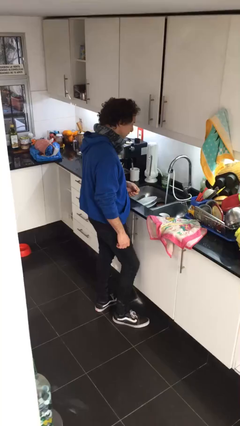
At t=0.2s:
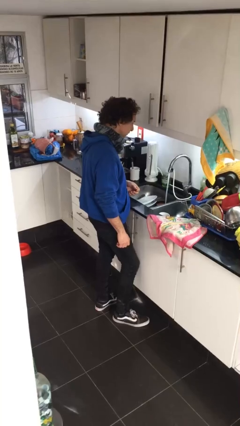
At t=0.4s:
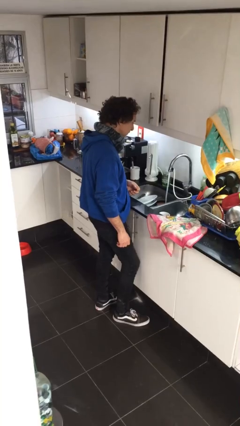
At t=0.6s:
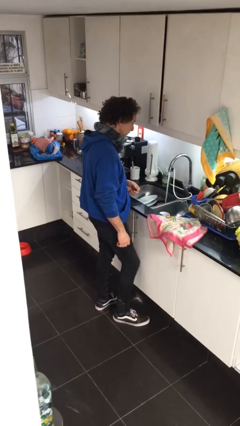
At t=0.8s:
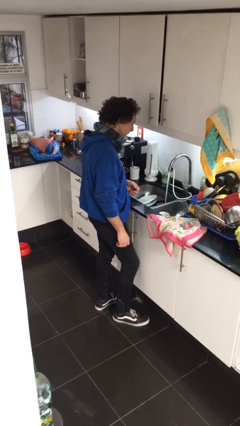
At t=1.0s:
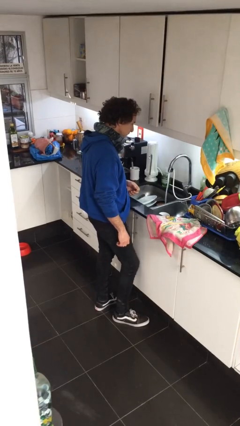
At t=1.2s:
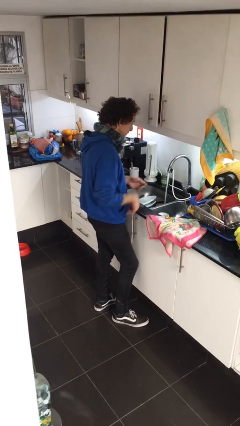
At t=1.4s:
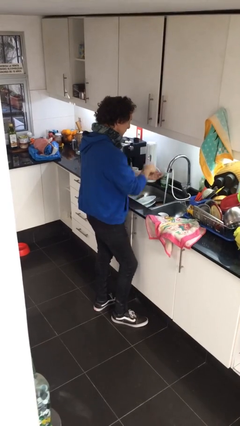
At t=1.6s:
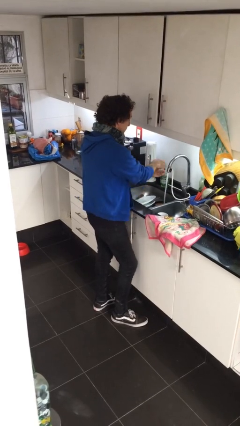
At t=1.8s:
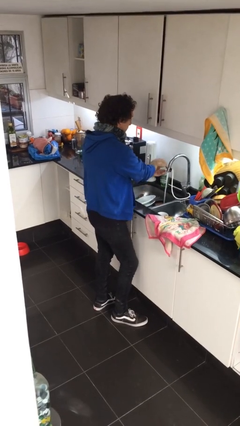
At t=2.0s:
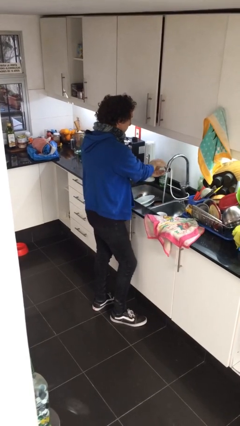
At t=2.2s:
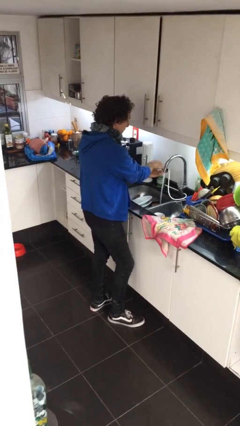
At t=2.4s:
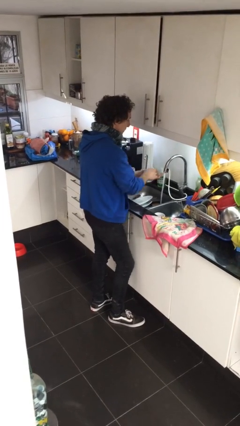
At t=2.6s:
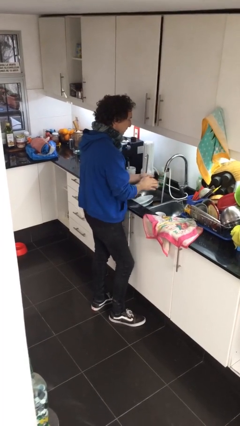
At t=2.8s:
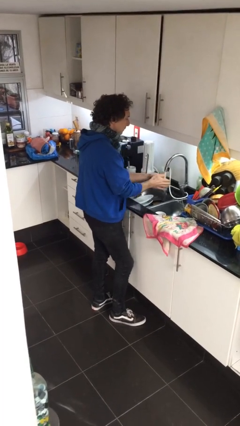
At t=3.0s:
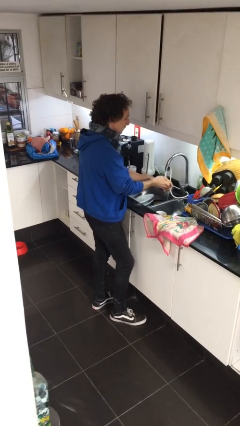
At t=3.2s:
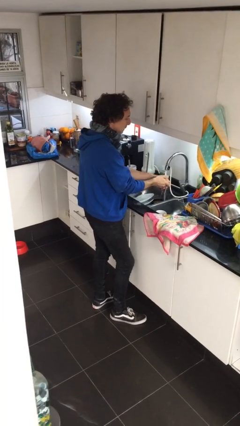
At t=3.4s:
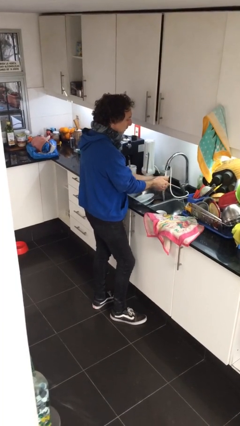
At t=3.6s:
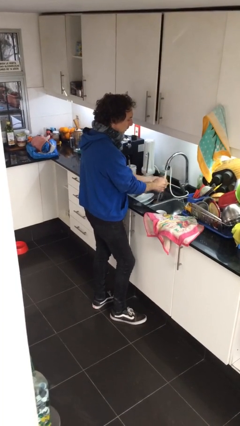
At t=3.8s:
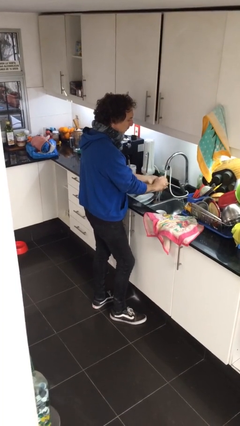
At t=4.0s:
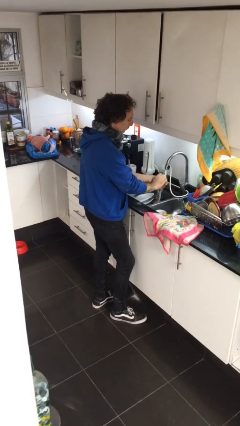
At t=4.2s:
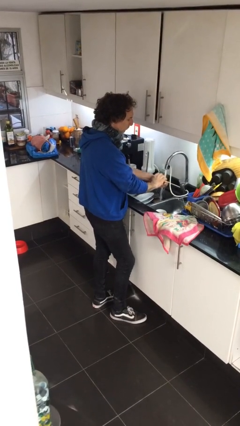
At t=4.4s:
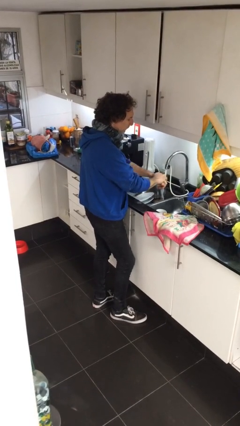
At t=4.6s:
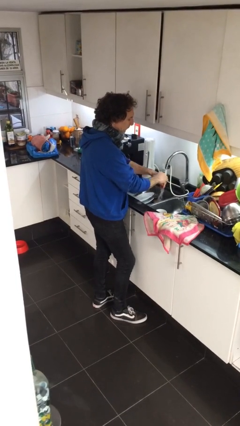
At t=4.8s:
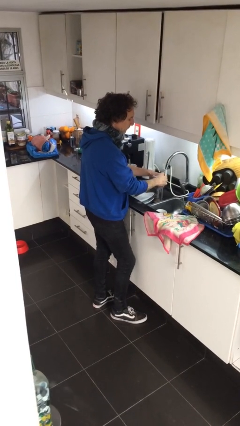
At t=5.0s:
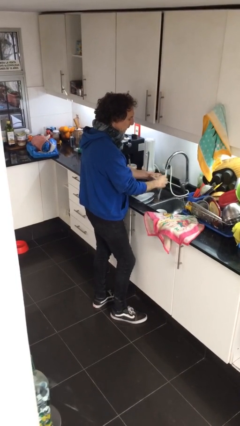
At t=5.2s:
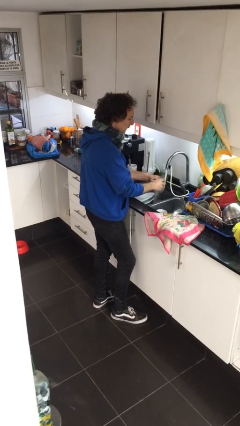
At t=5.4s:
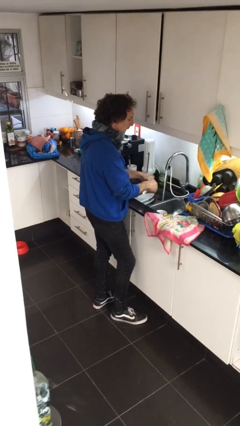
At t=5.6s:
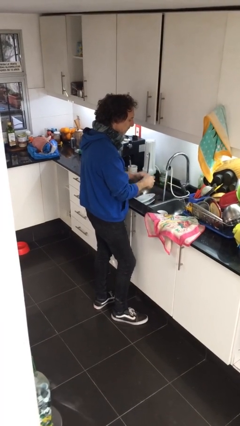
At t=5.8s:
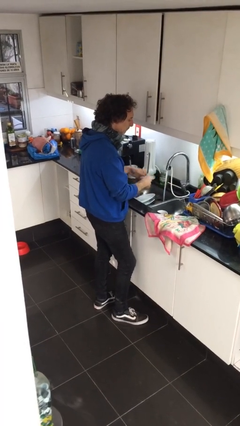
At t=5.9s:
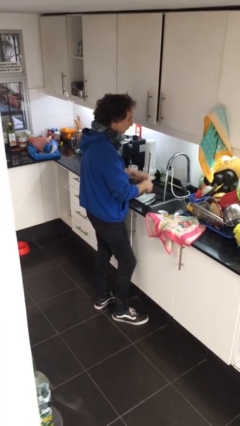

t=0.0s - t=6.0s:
person washes hands

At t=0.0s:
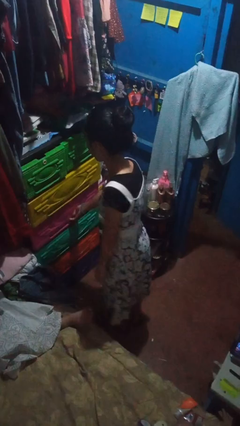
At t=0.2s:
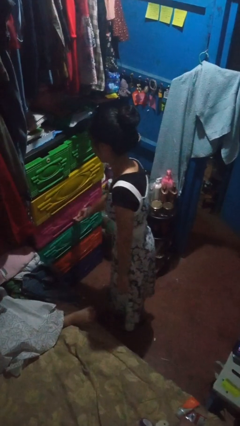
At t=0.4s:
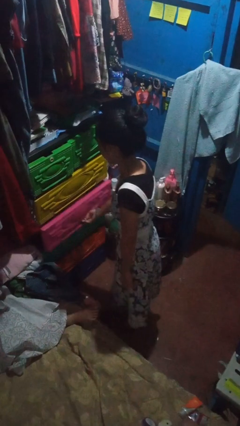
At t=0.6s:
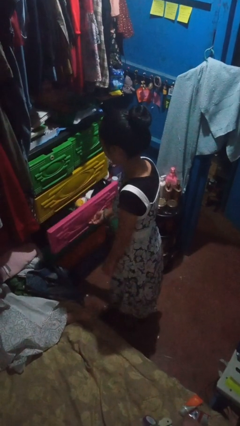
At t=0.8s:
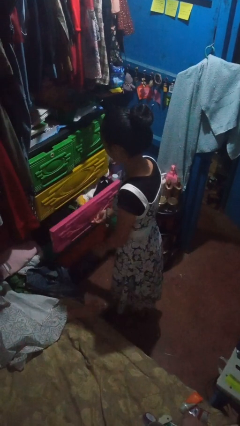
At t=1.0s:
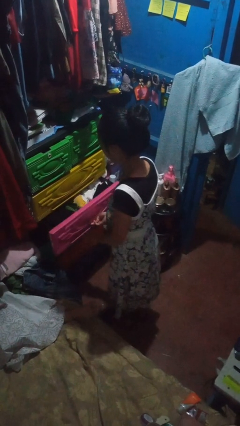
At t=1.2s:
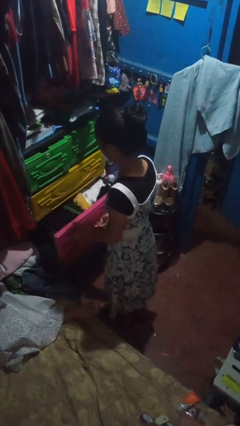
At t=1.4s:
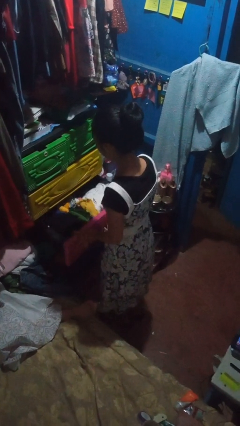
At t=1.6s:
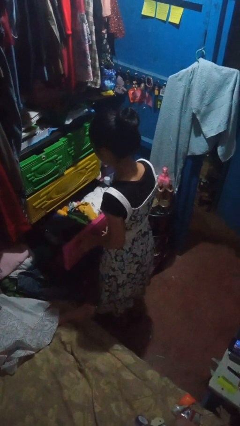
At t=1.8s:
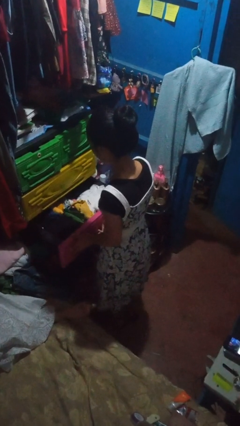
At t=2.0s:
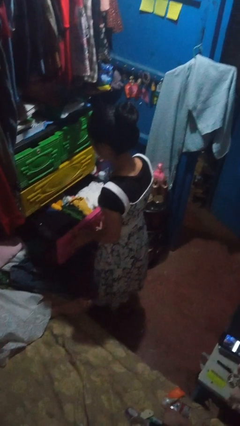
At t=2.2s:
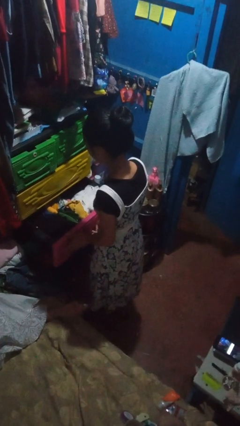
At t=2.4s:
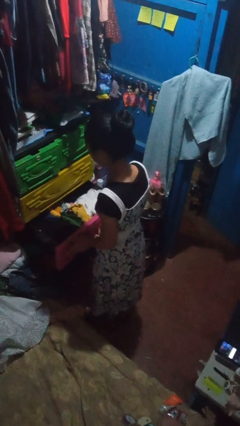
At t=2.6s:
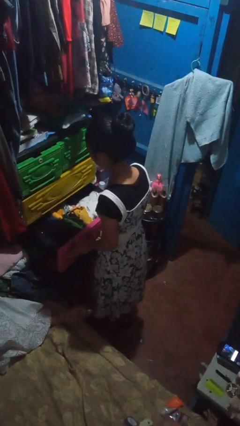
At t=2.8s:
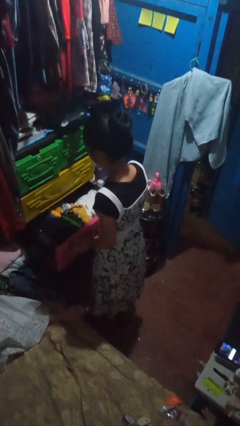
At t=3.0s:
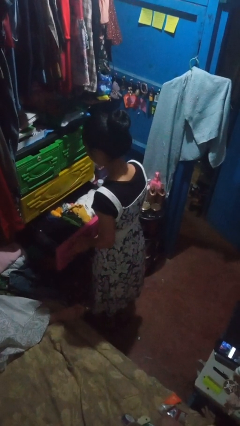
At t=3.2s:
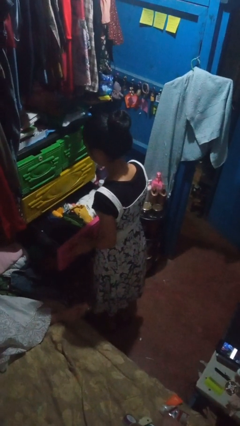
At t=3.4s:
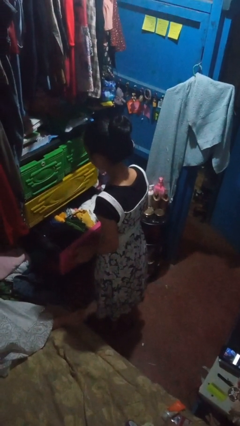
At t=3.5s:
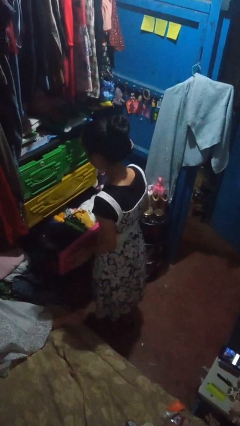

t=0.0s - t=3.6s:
person opens dresser drawer

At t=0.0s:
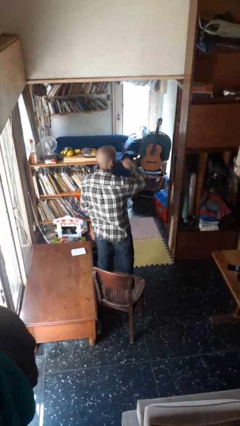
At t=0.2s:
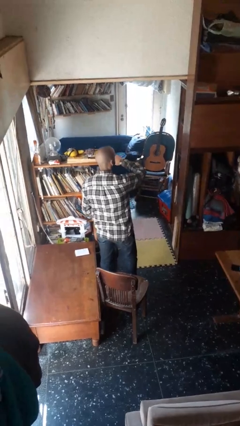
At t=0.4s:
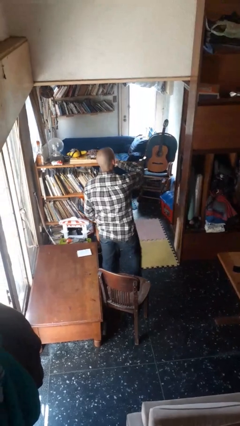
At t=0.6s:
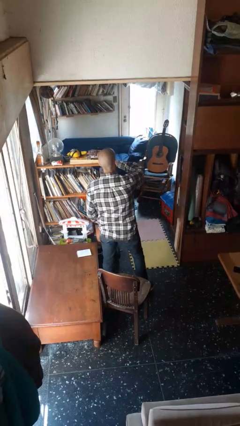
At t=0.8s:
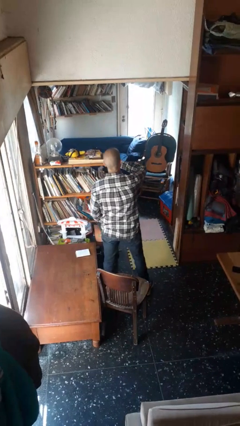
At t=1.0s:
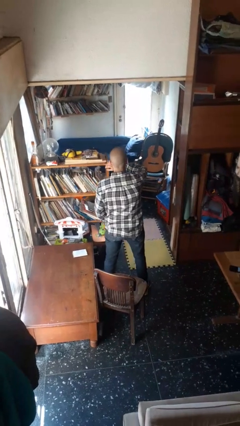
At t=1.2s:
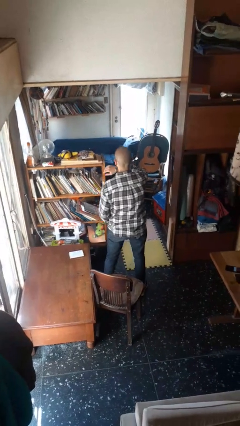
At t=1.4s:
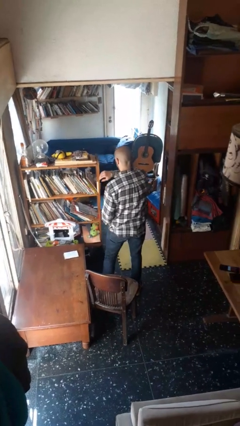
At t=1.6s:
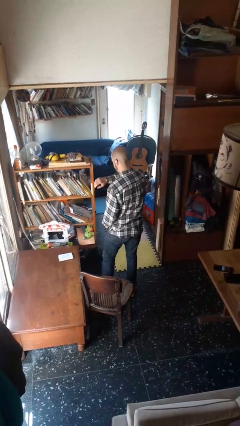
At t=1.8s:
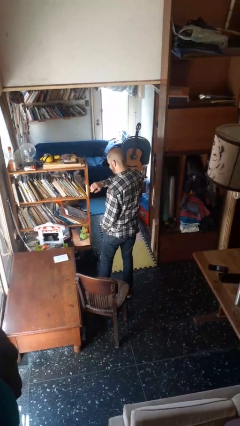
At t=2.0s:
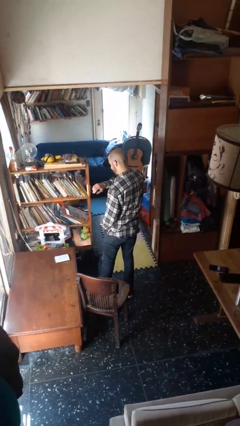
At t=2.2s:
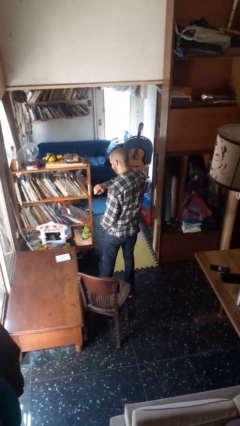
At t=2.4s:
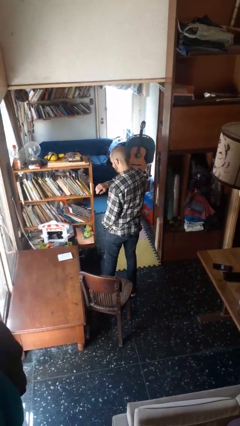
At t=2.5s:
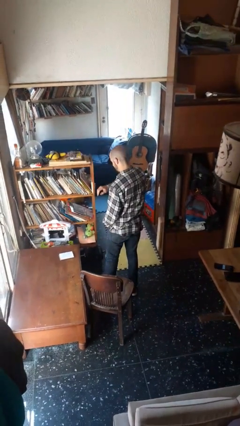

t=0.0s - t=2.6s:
person looks at wristwatch

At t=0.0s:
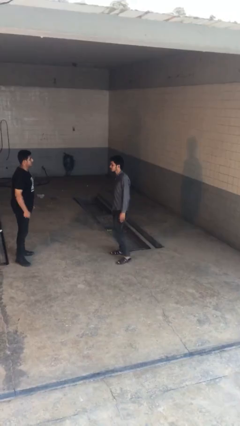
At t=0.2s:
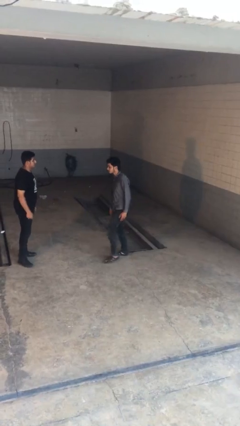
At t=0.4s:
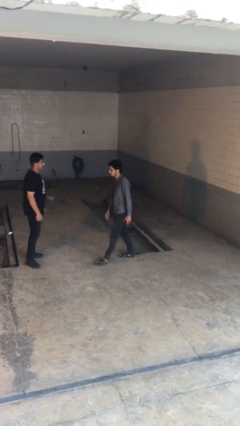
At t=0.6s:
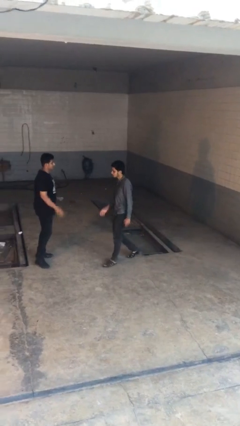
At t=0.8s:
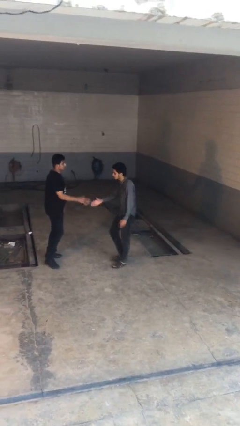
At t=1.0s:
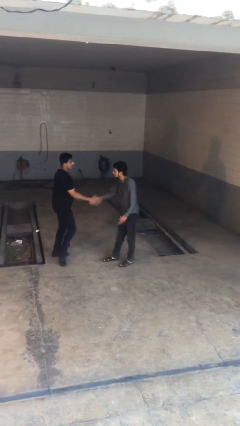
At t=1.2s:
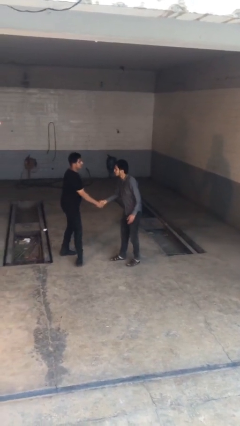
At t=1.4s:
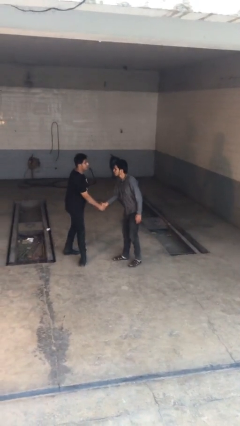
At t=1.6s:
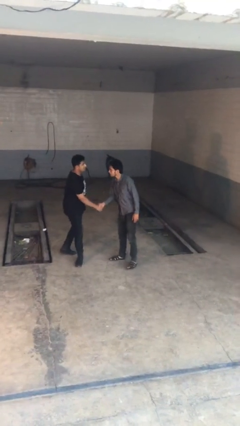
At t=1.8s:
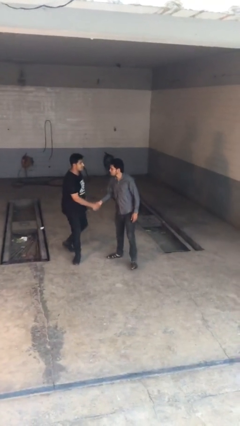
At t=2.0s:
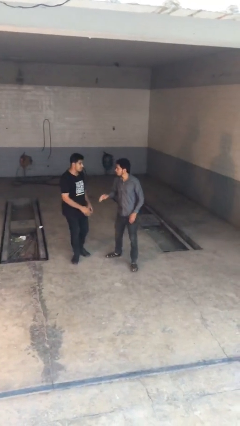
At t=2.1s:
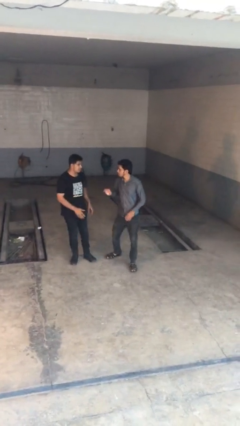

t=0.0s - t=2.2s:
person shakes hand

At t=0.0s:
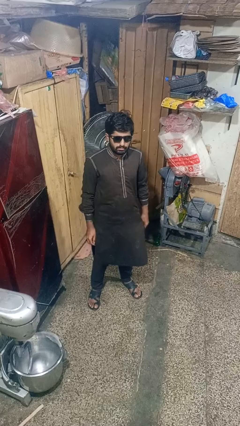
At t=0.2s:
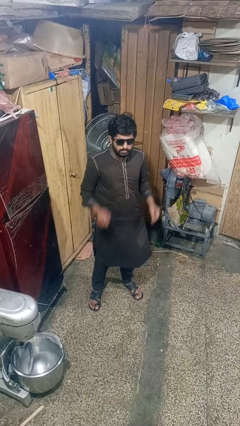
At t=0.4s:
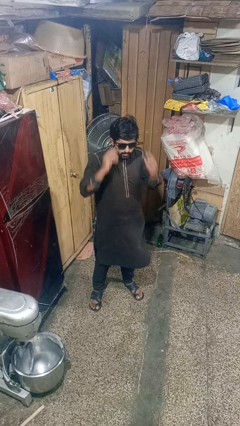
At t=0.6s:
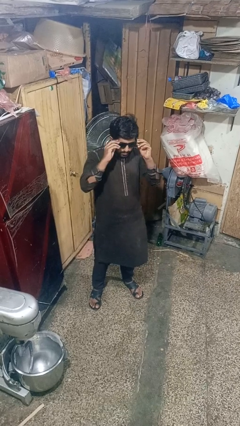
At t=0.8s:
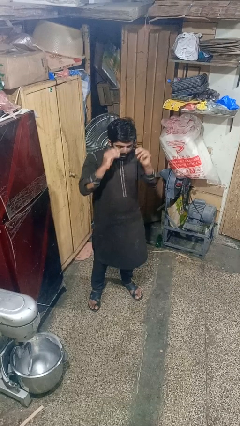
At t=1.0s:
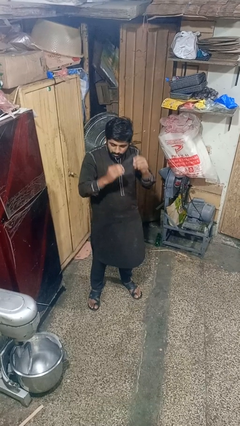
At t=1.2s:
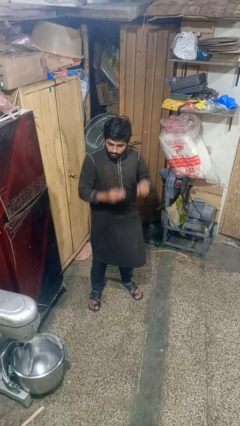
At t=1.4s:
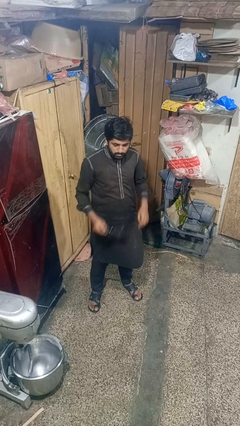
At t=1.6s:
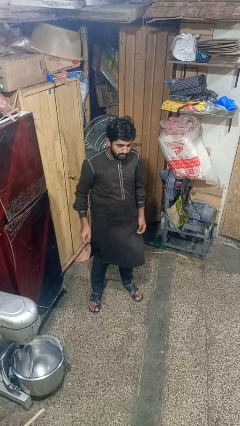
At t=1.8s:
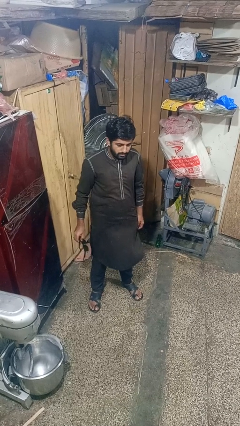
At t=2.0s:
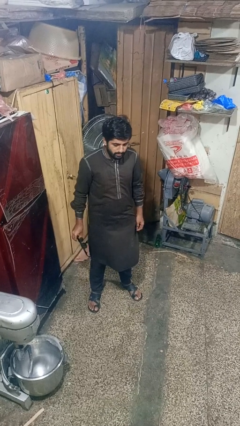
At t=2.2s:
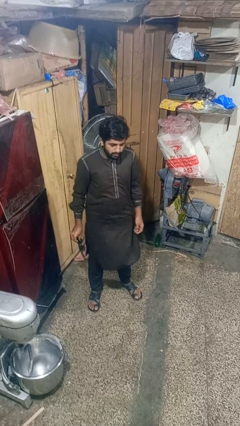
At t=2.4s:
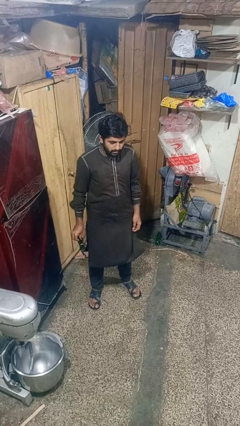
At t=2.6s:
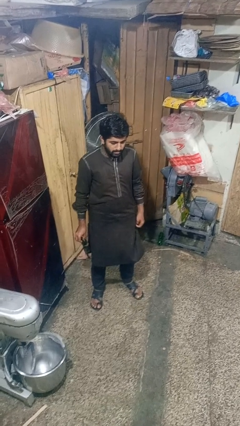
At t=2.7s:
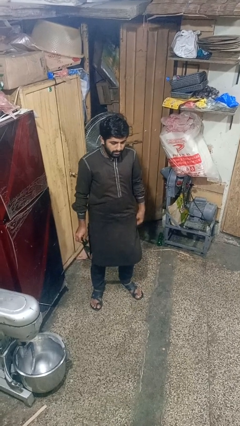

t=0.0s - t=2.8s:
person takes off sunglasses
